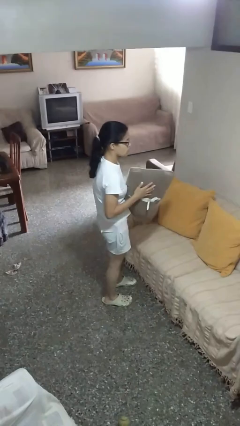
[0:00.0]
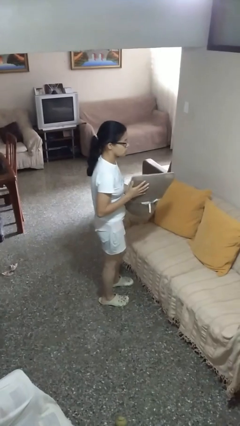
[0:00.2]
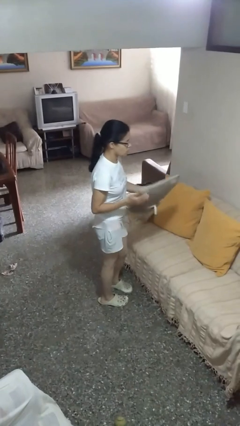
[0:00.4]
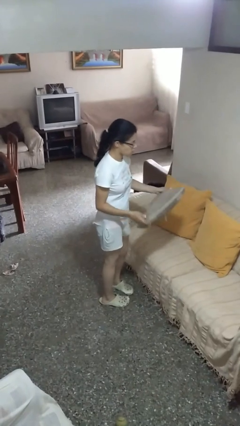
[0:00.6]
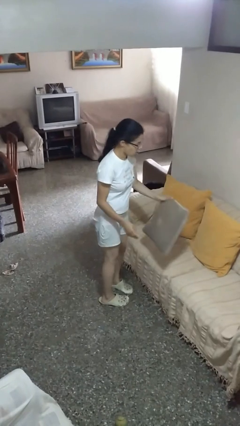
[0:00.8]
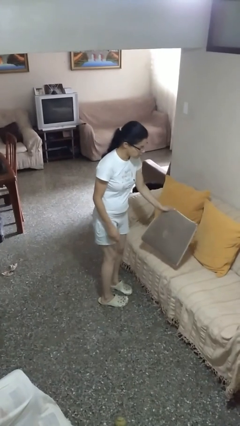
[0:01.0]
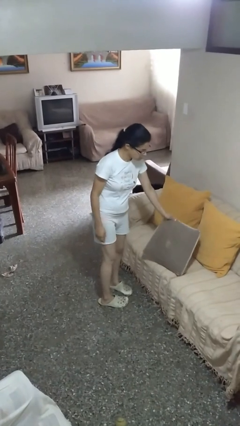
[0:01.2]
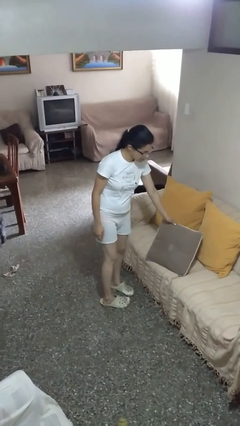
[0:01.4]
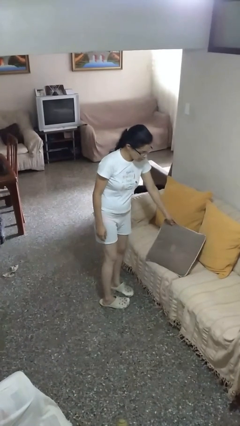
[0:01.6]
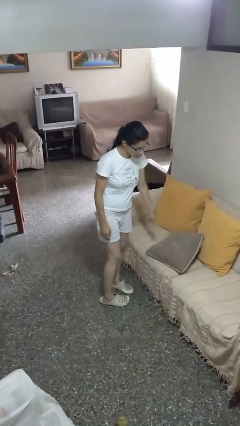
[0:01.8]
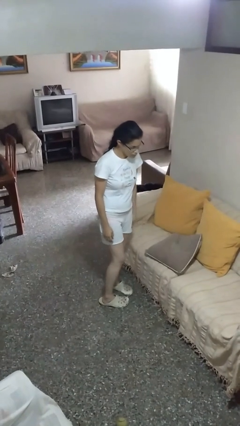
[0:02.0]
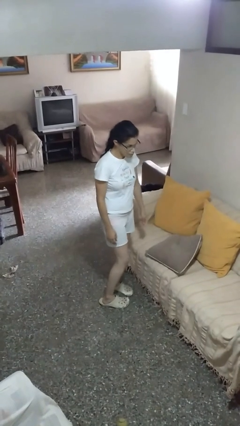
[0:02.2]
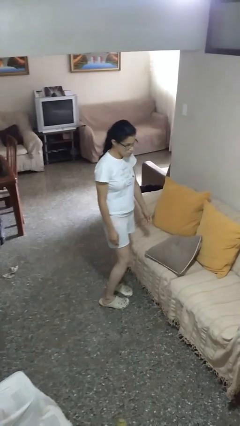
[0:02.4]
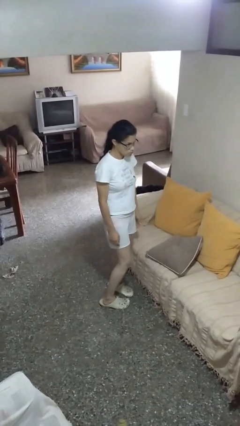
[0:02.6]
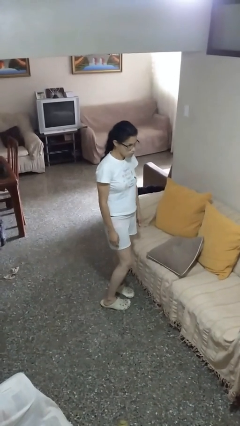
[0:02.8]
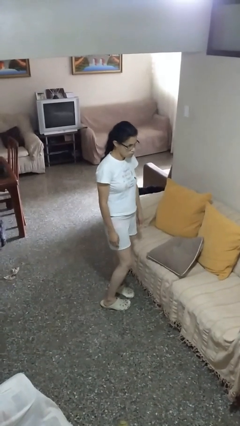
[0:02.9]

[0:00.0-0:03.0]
person puts down object on couch

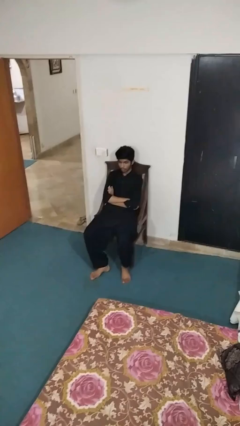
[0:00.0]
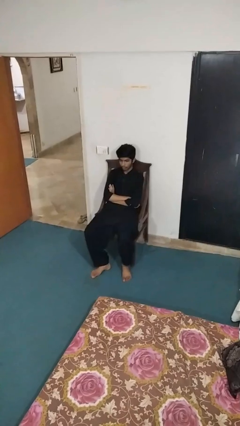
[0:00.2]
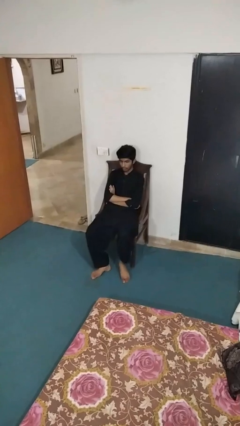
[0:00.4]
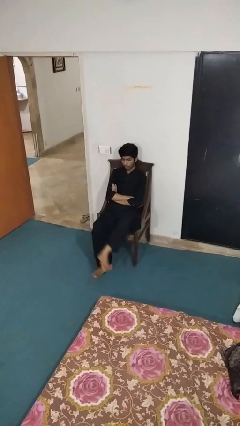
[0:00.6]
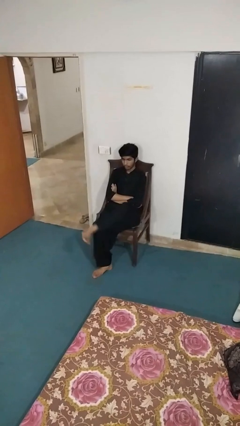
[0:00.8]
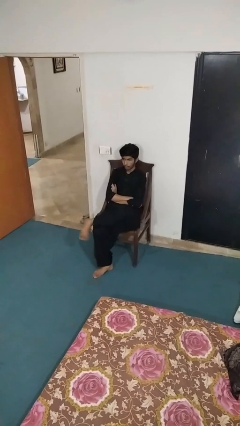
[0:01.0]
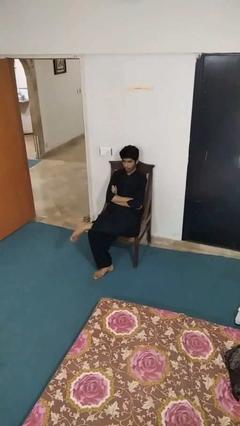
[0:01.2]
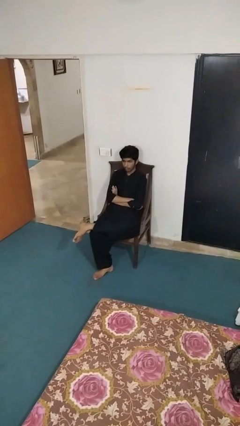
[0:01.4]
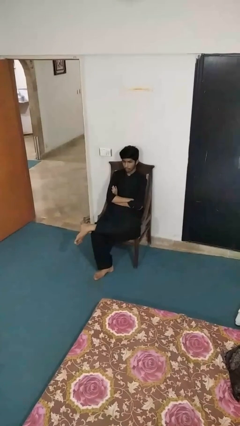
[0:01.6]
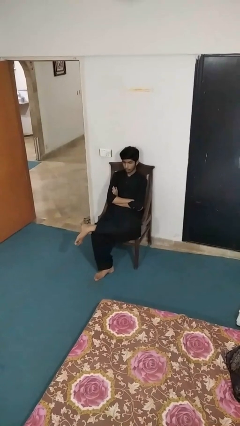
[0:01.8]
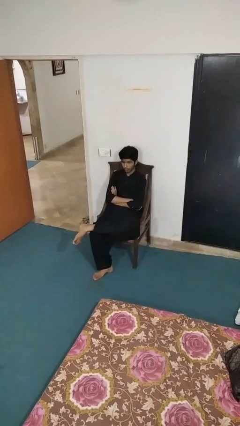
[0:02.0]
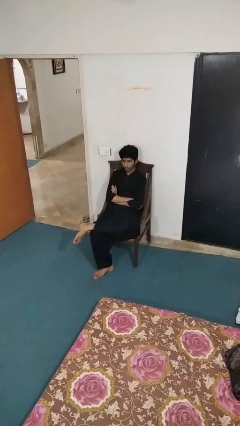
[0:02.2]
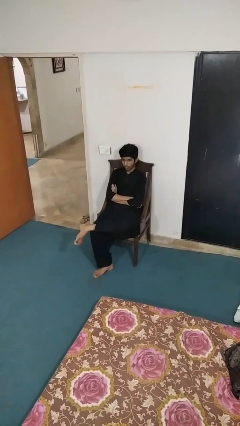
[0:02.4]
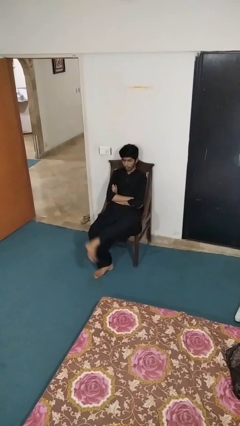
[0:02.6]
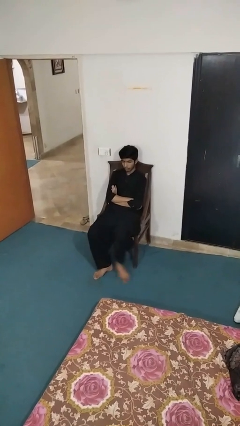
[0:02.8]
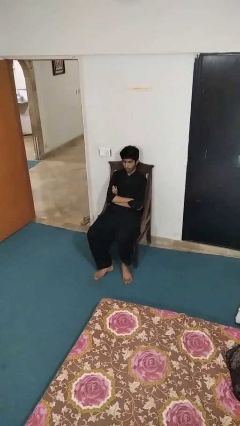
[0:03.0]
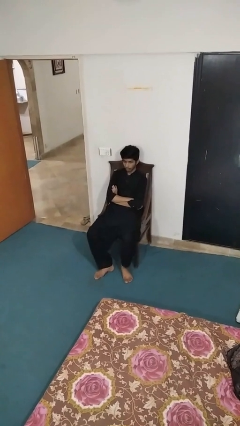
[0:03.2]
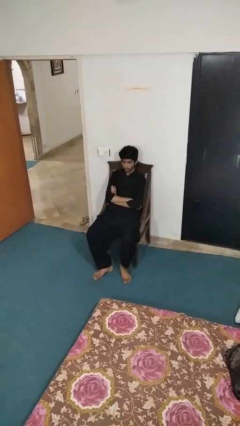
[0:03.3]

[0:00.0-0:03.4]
person crosses legs

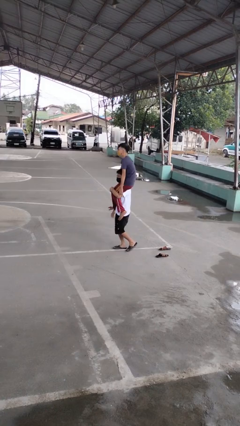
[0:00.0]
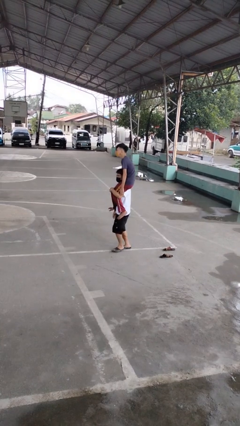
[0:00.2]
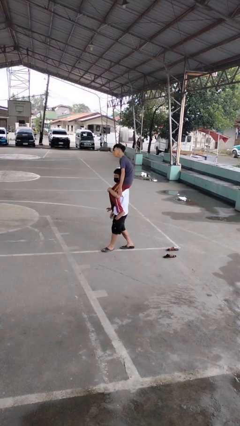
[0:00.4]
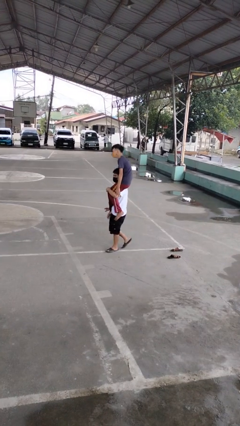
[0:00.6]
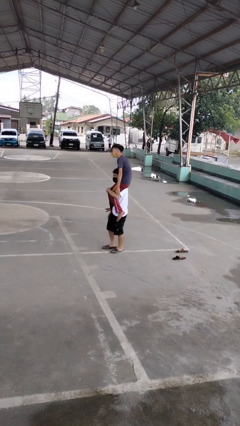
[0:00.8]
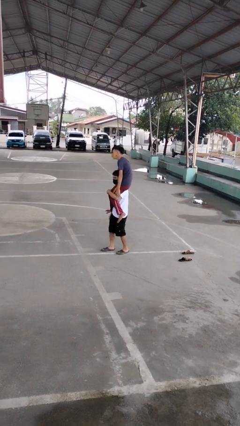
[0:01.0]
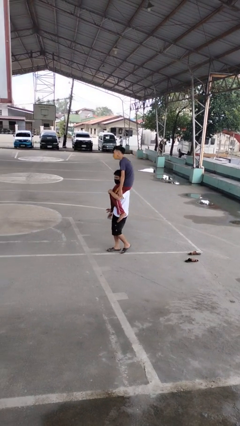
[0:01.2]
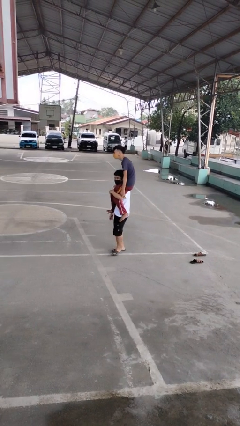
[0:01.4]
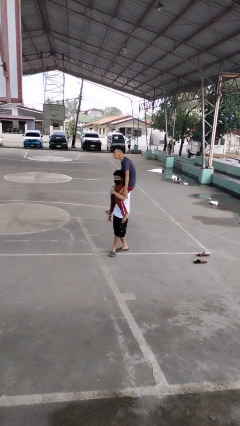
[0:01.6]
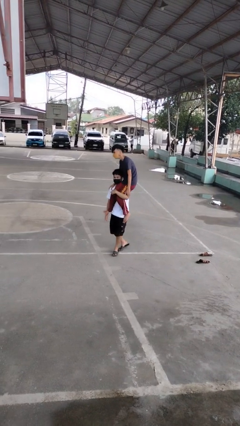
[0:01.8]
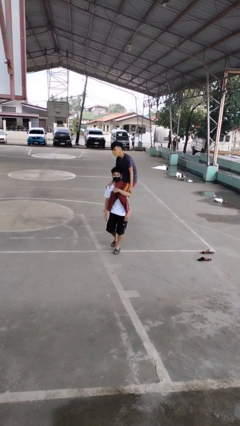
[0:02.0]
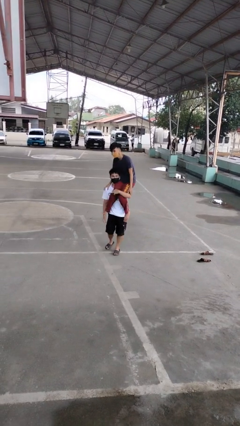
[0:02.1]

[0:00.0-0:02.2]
person carries person on shoulders

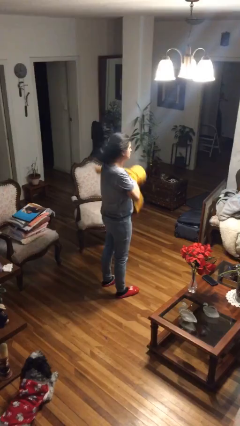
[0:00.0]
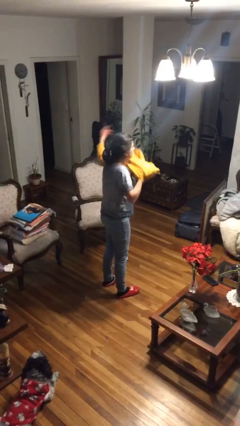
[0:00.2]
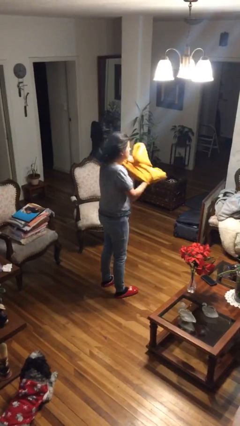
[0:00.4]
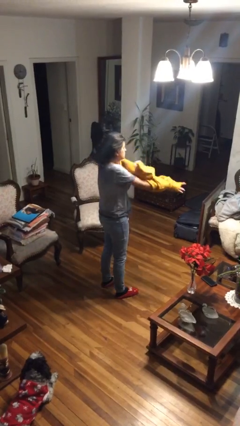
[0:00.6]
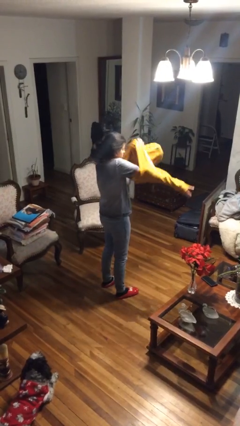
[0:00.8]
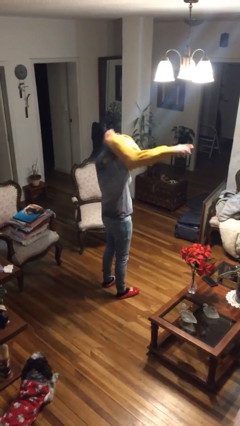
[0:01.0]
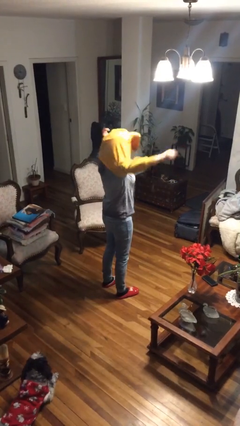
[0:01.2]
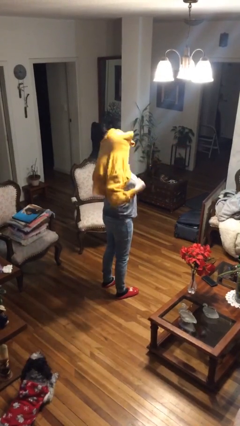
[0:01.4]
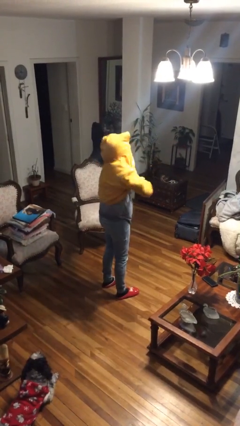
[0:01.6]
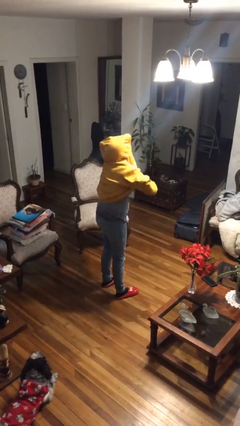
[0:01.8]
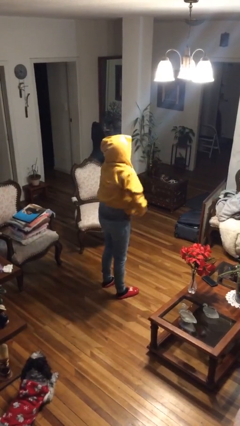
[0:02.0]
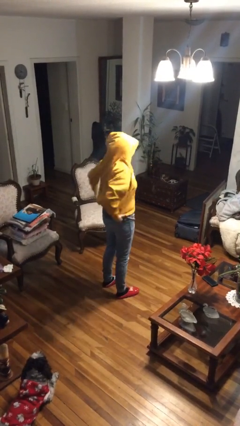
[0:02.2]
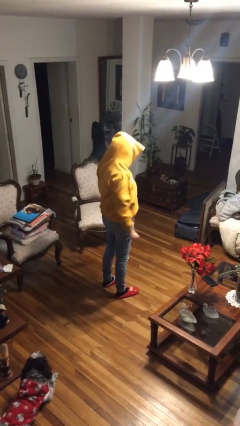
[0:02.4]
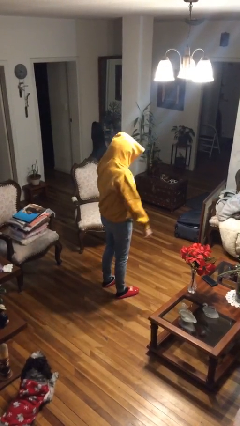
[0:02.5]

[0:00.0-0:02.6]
person puts on hoodie

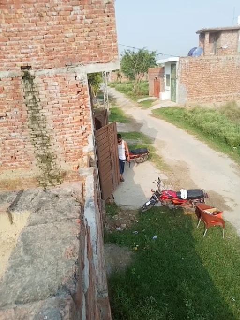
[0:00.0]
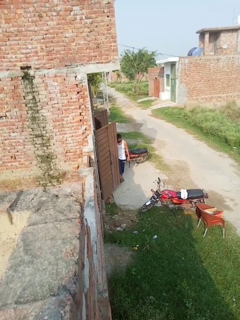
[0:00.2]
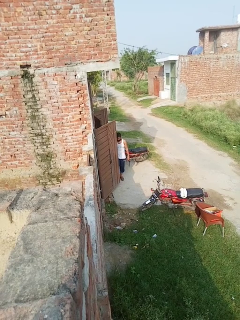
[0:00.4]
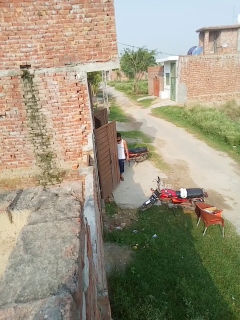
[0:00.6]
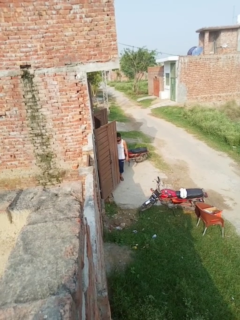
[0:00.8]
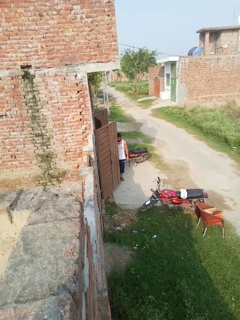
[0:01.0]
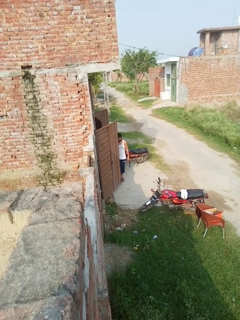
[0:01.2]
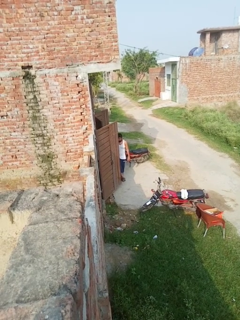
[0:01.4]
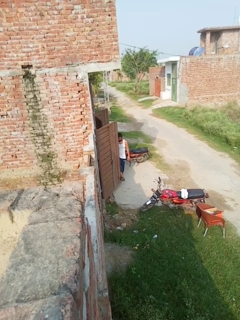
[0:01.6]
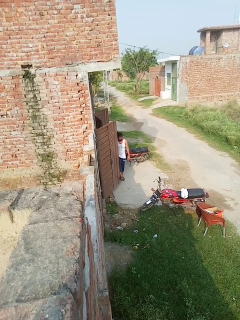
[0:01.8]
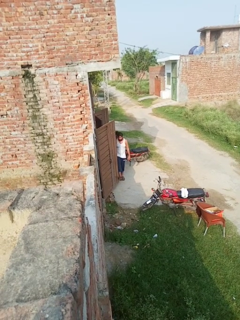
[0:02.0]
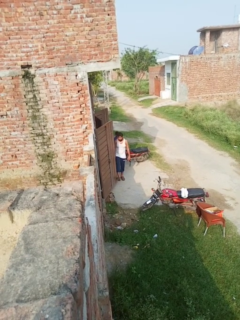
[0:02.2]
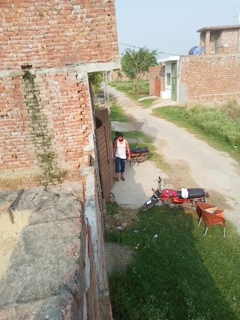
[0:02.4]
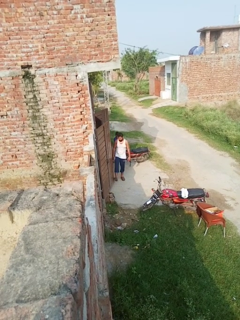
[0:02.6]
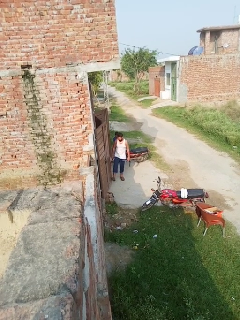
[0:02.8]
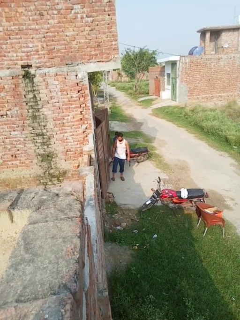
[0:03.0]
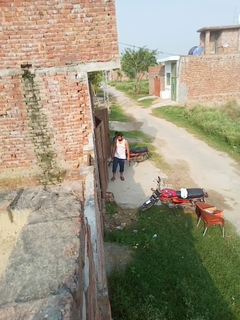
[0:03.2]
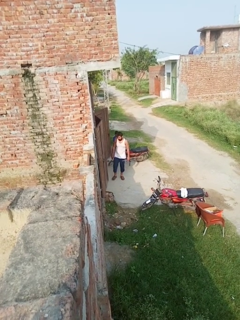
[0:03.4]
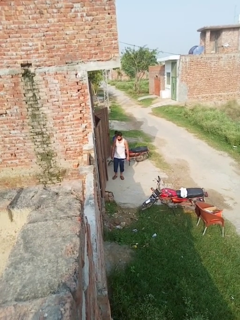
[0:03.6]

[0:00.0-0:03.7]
person closes door with foot

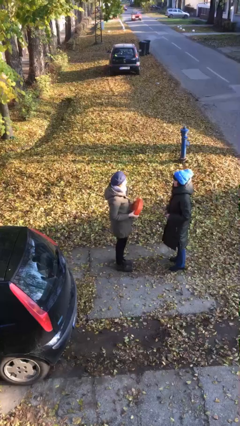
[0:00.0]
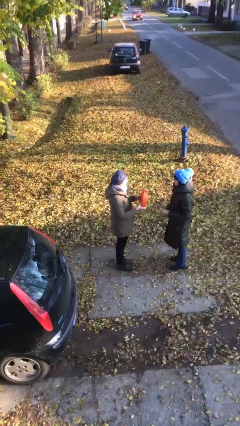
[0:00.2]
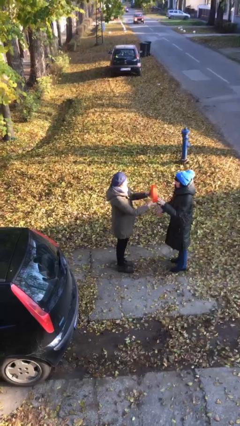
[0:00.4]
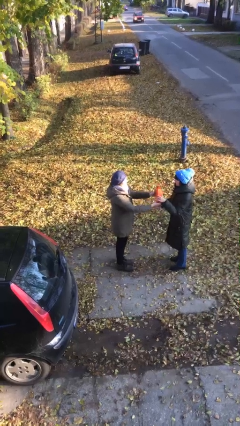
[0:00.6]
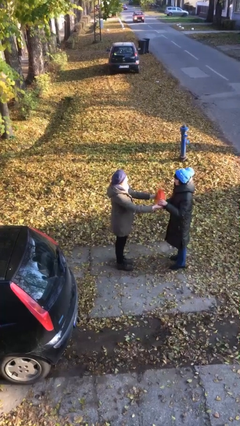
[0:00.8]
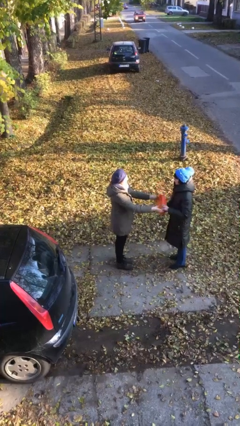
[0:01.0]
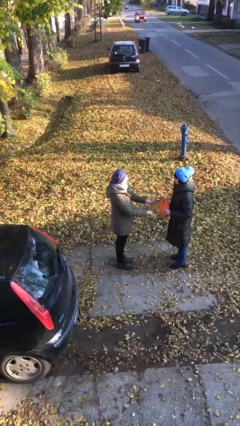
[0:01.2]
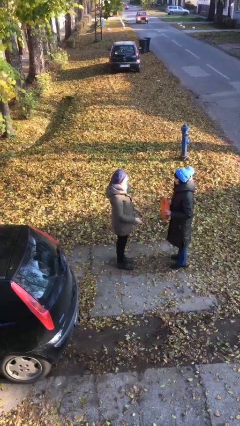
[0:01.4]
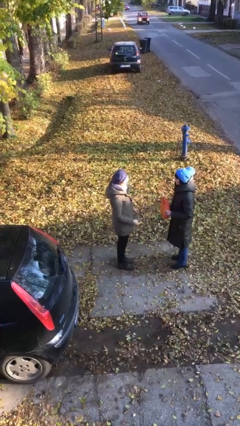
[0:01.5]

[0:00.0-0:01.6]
person transfers object to person

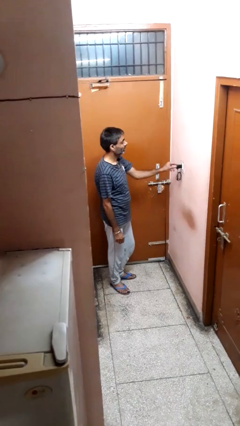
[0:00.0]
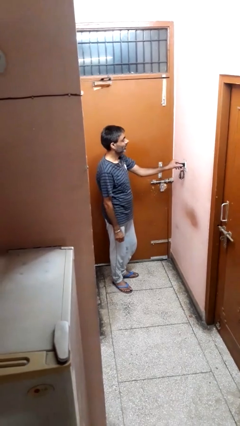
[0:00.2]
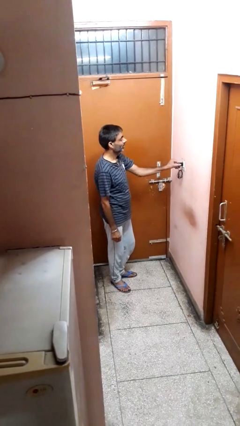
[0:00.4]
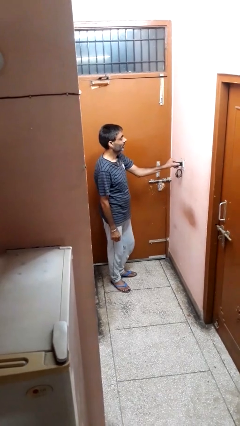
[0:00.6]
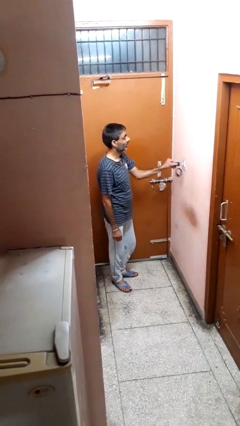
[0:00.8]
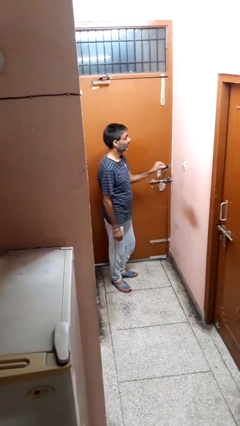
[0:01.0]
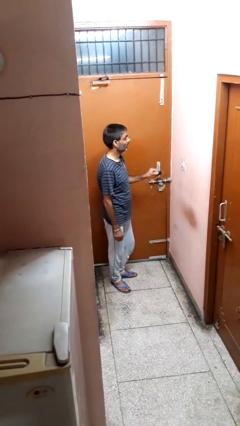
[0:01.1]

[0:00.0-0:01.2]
person unplugs from electrical socket

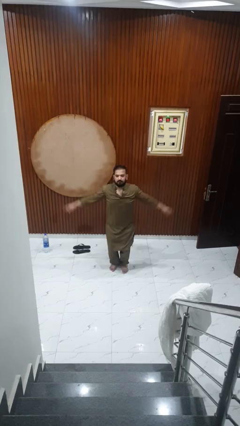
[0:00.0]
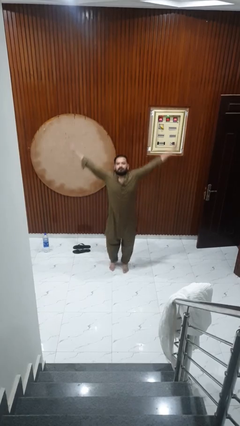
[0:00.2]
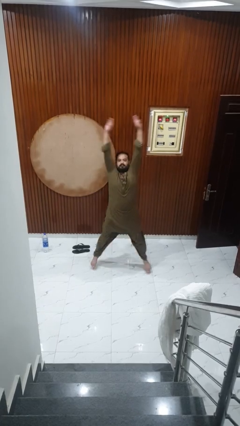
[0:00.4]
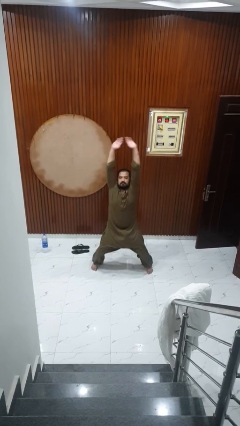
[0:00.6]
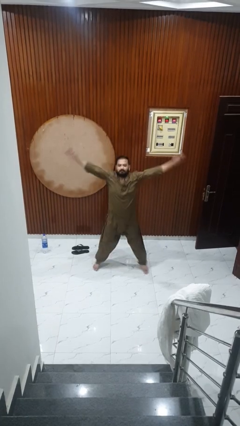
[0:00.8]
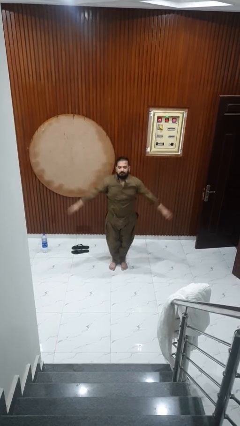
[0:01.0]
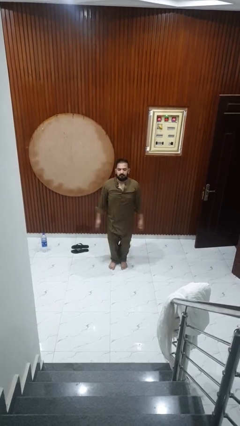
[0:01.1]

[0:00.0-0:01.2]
person exercises with jumping jacks
